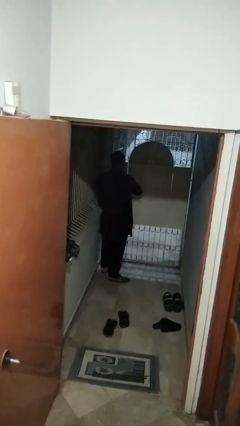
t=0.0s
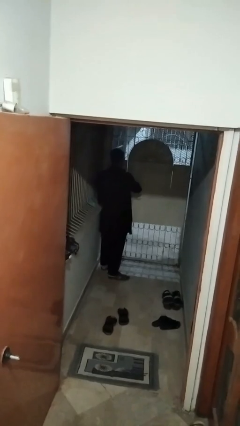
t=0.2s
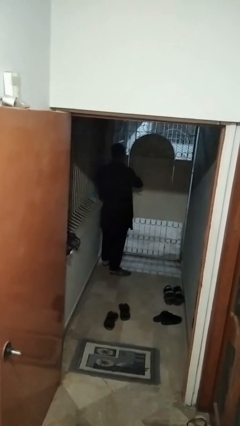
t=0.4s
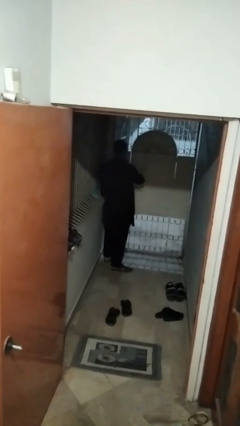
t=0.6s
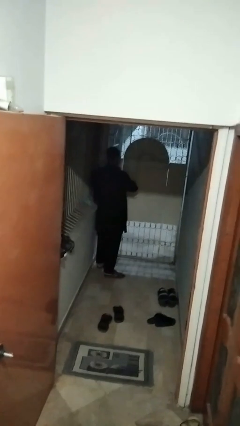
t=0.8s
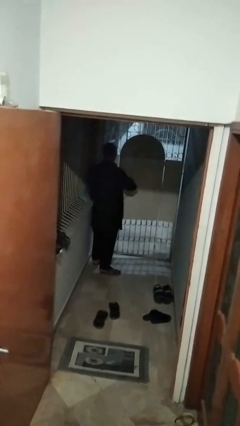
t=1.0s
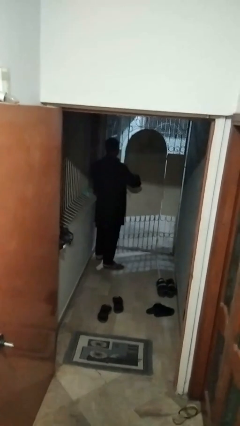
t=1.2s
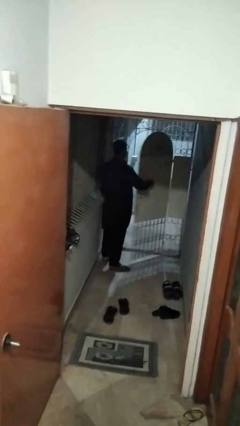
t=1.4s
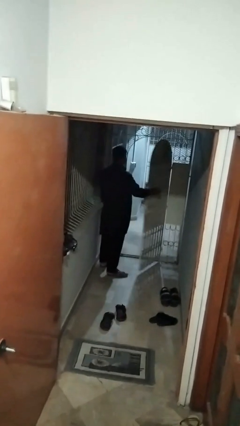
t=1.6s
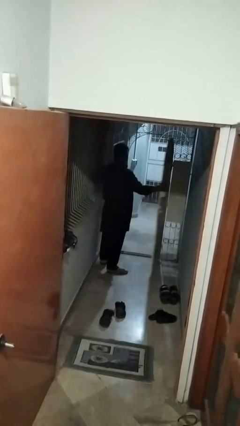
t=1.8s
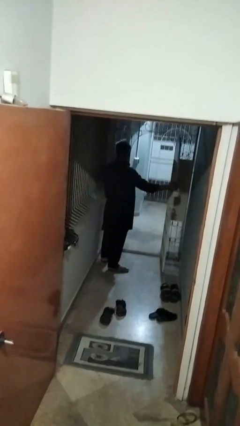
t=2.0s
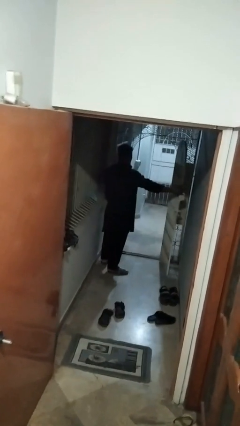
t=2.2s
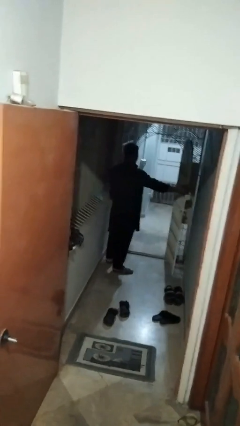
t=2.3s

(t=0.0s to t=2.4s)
person opens gate

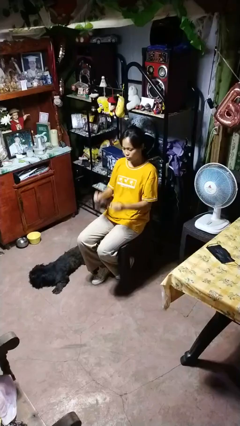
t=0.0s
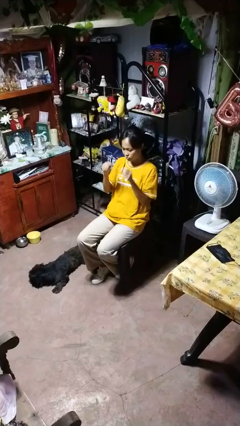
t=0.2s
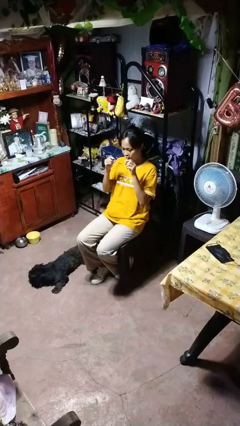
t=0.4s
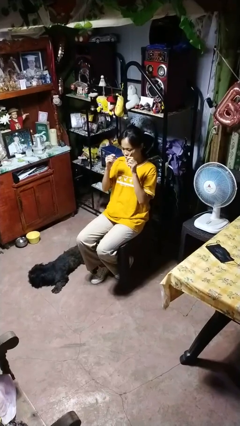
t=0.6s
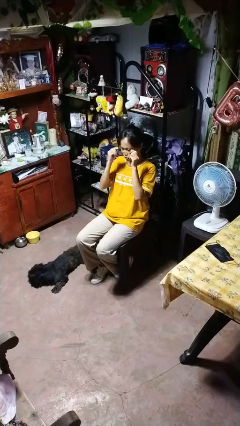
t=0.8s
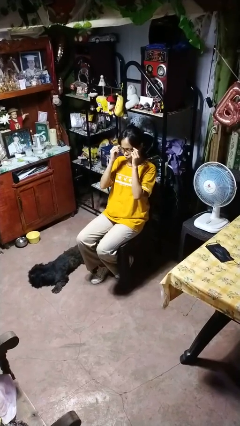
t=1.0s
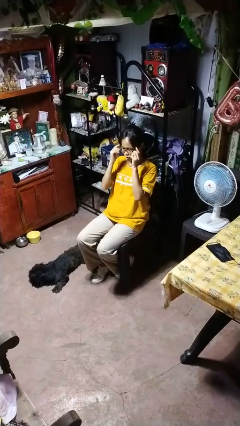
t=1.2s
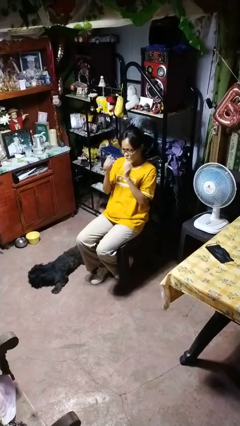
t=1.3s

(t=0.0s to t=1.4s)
person puts on glasses

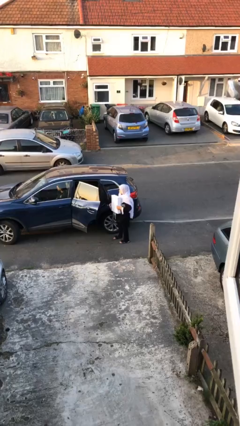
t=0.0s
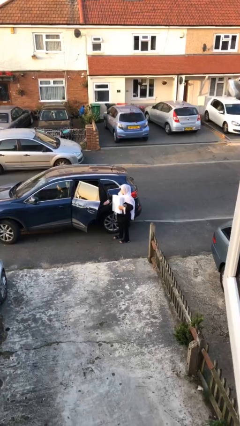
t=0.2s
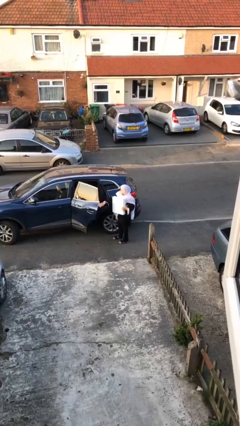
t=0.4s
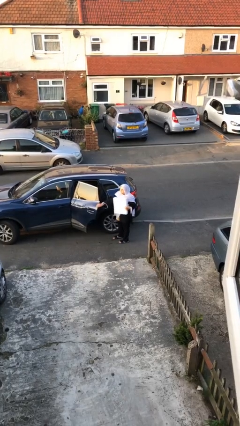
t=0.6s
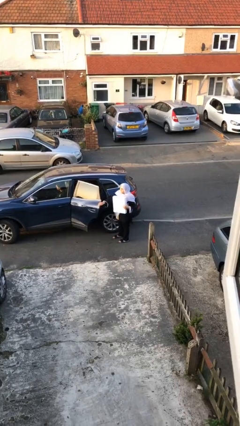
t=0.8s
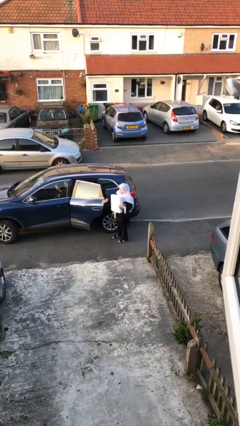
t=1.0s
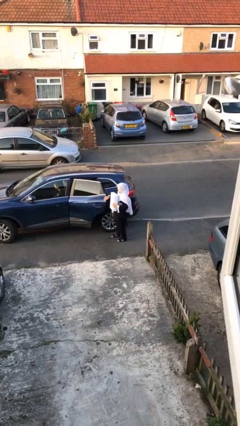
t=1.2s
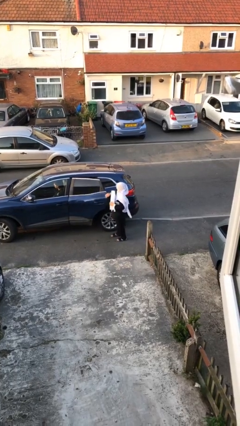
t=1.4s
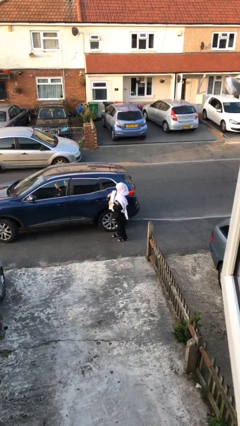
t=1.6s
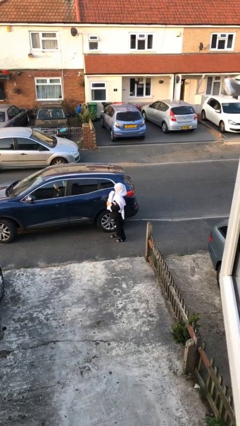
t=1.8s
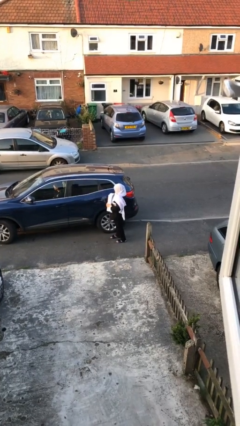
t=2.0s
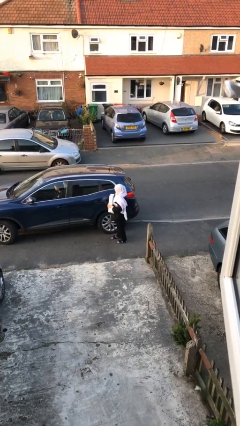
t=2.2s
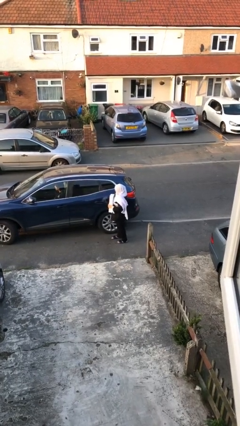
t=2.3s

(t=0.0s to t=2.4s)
person closes car door

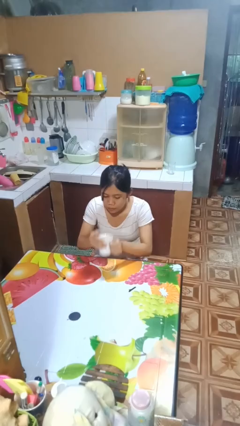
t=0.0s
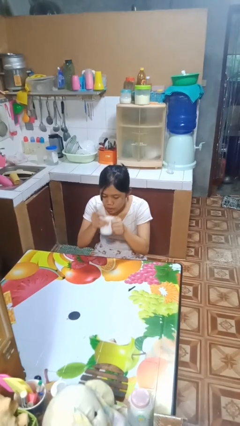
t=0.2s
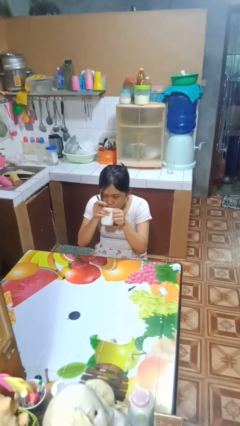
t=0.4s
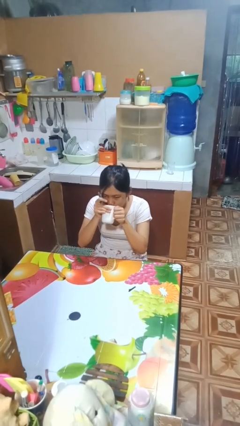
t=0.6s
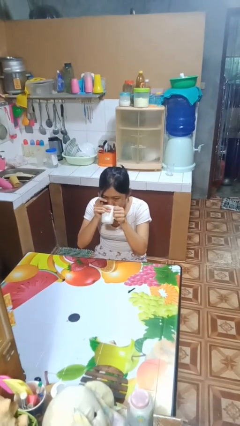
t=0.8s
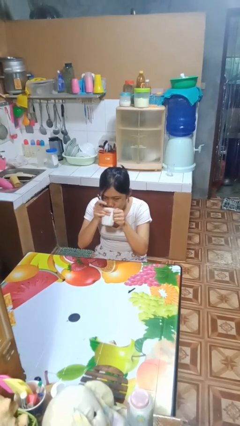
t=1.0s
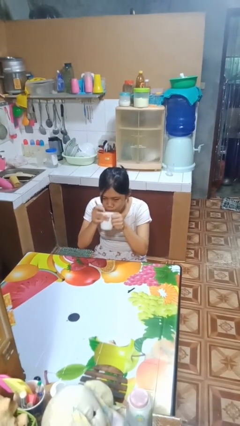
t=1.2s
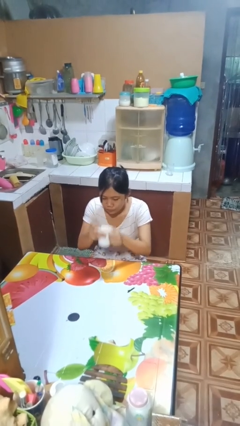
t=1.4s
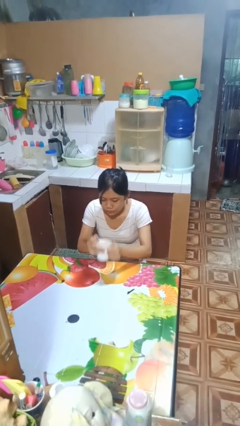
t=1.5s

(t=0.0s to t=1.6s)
person drinks from mug

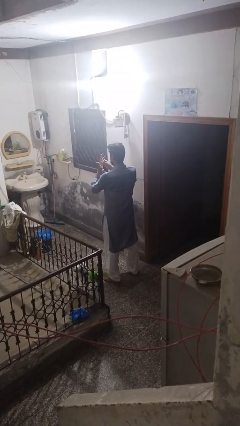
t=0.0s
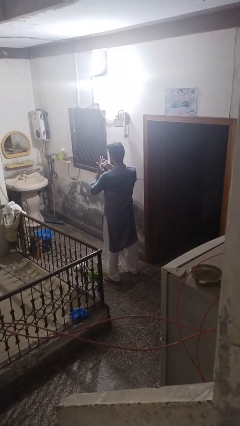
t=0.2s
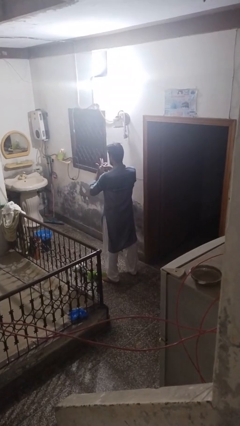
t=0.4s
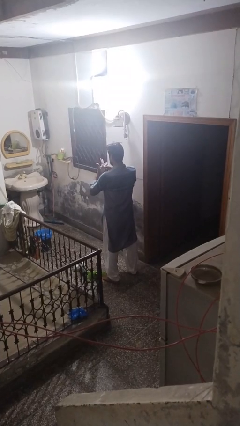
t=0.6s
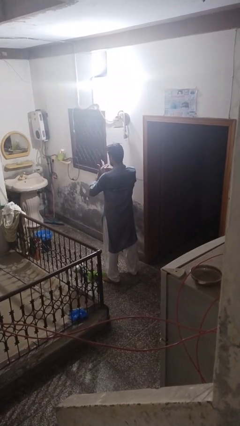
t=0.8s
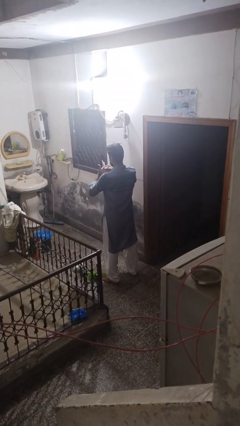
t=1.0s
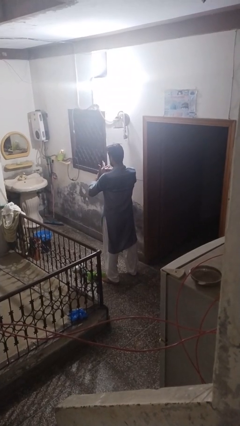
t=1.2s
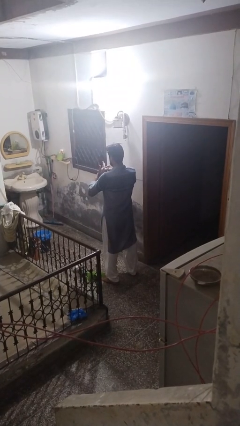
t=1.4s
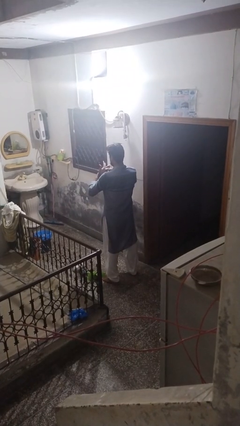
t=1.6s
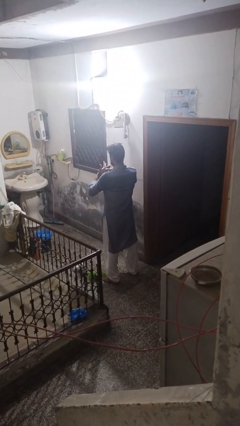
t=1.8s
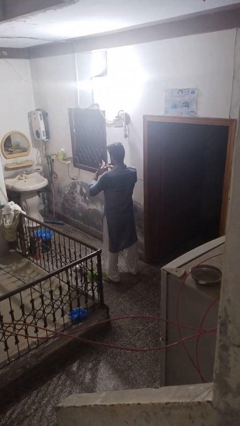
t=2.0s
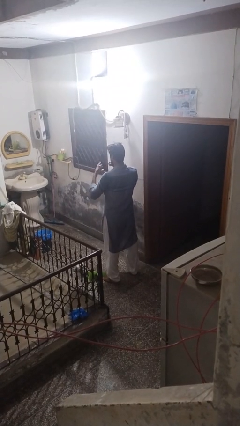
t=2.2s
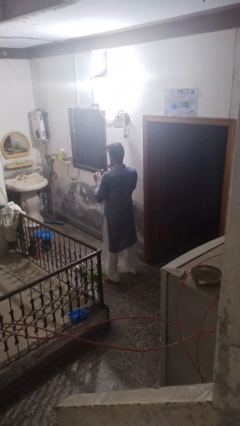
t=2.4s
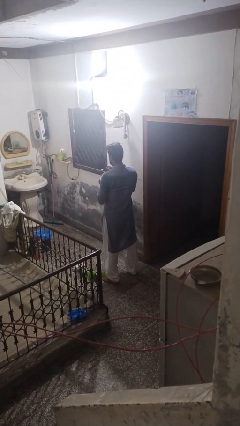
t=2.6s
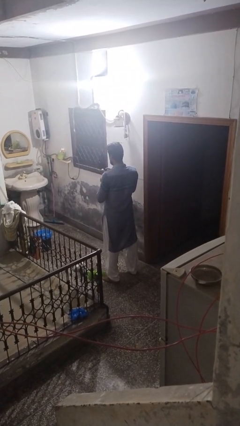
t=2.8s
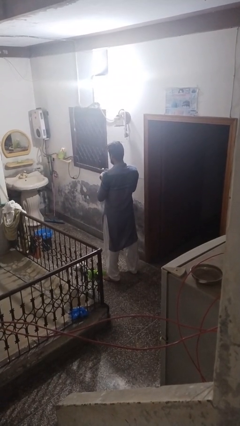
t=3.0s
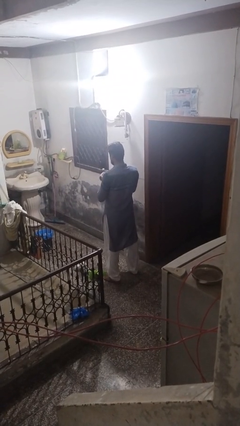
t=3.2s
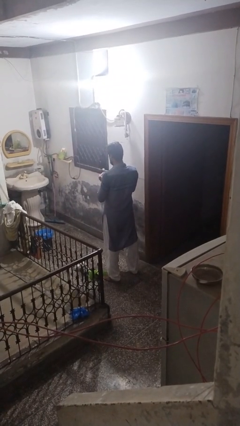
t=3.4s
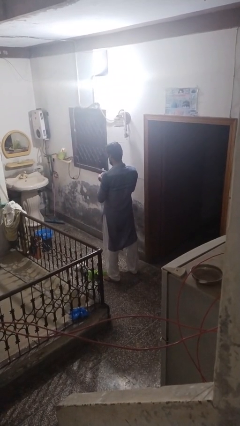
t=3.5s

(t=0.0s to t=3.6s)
person takes off ring

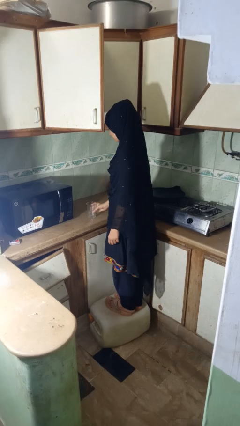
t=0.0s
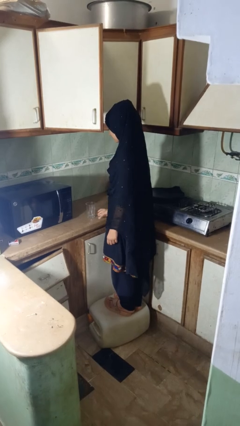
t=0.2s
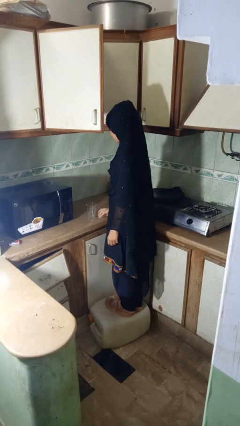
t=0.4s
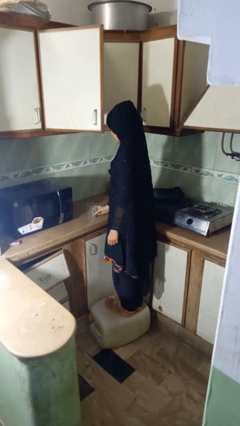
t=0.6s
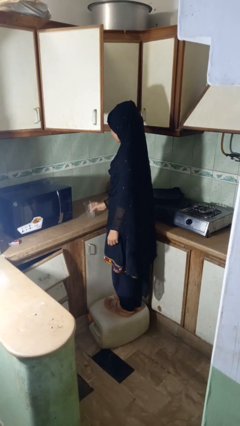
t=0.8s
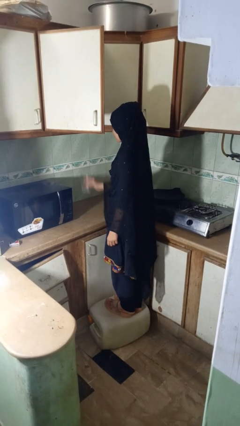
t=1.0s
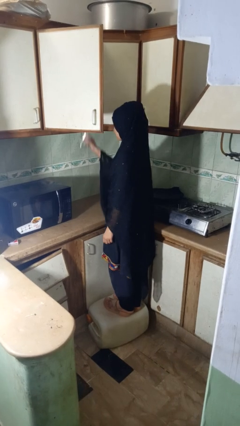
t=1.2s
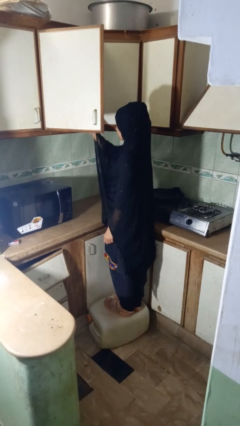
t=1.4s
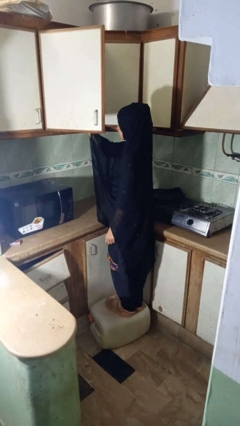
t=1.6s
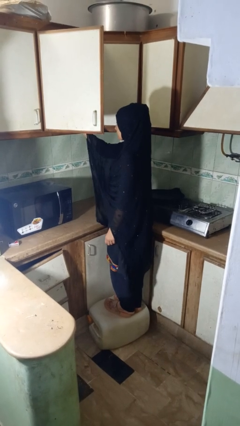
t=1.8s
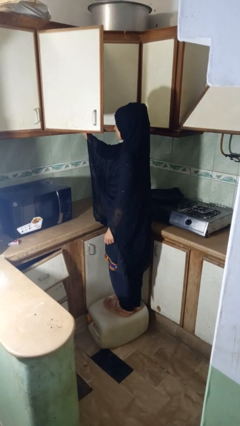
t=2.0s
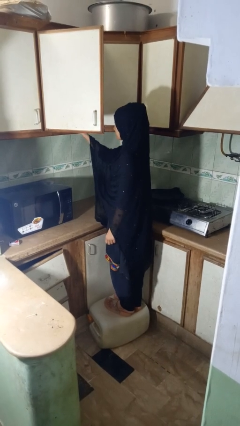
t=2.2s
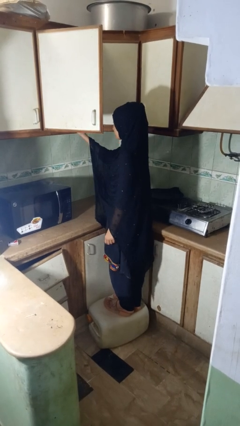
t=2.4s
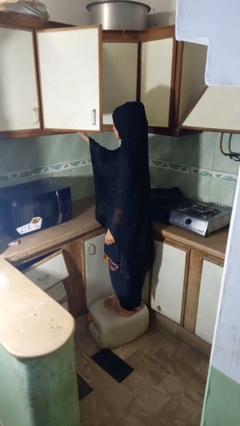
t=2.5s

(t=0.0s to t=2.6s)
person picks up object from cabinet

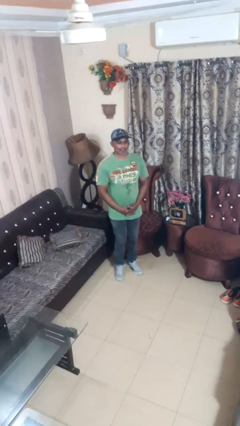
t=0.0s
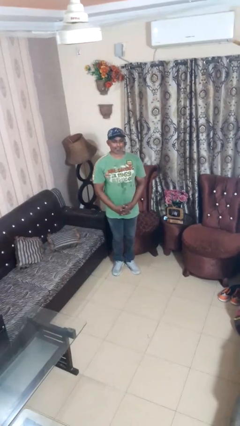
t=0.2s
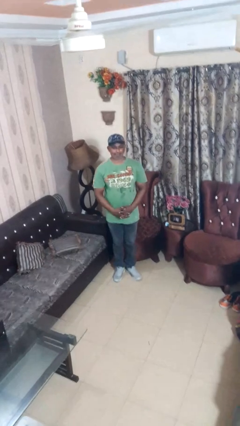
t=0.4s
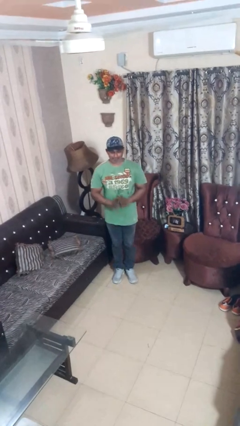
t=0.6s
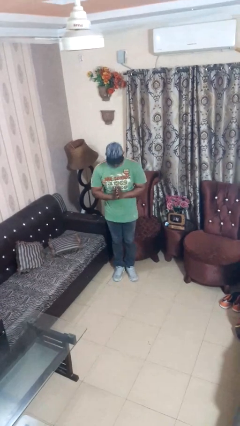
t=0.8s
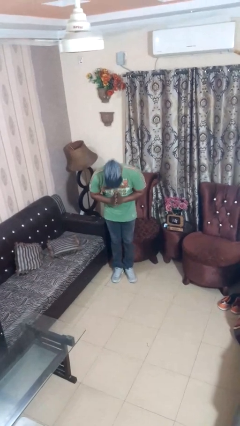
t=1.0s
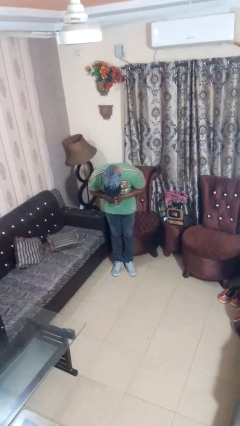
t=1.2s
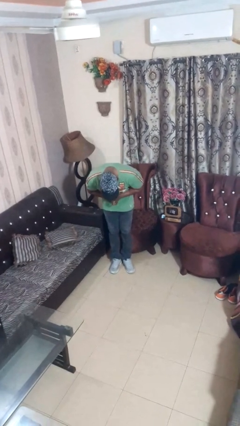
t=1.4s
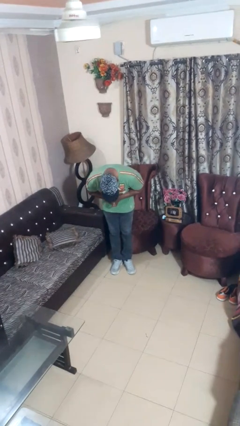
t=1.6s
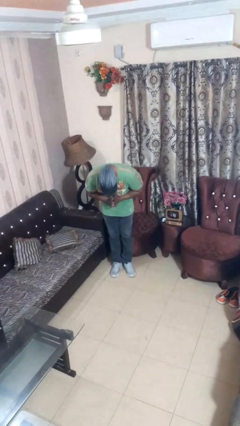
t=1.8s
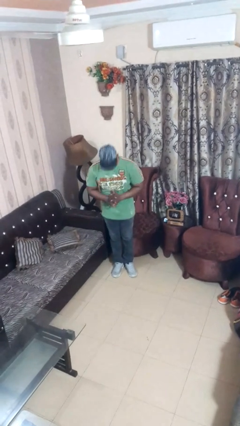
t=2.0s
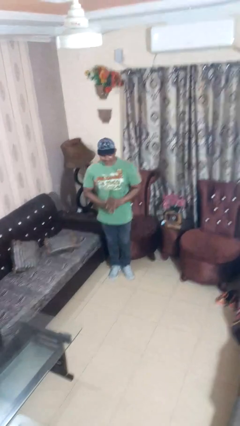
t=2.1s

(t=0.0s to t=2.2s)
person bows

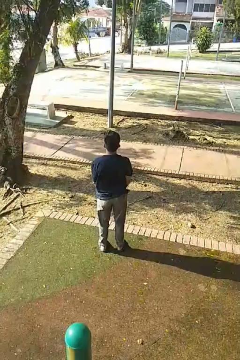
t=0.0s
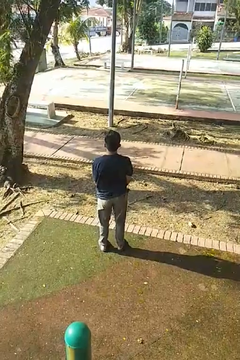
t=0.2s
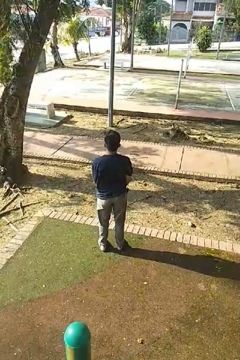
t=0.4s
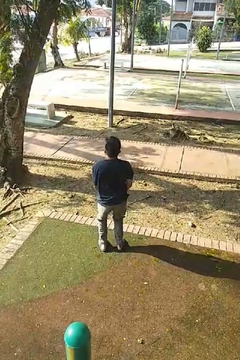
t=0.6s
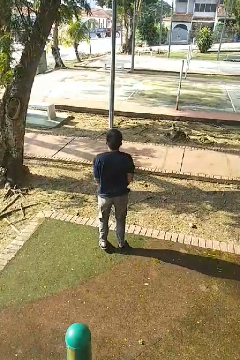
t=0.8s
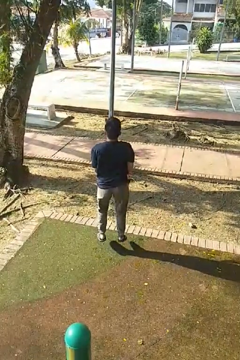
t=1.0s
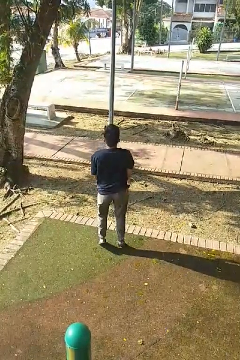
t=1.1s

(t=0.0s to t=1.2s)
person jumps
